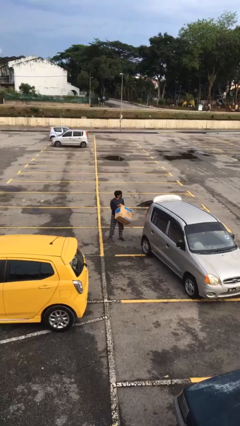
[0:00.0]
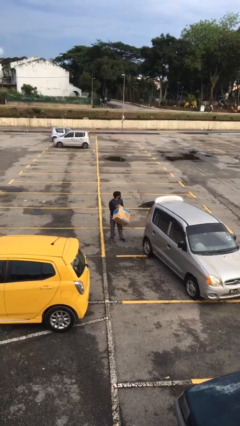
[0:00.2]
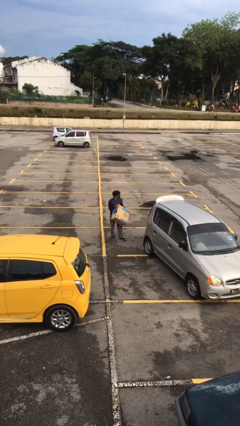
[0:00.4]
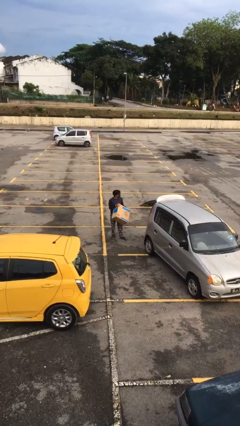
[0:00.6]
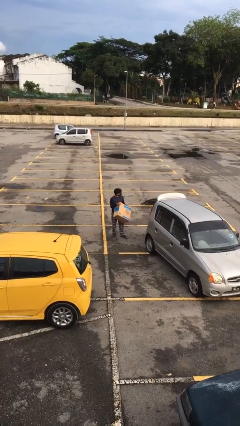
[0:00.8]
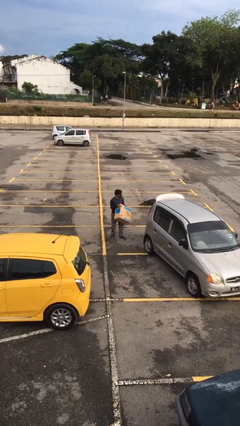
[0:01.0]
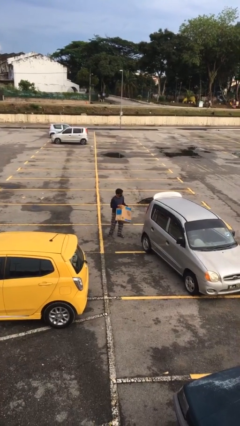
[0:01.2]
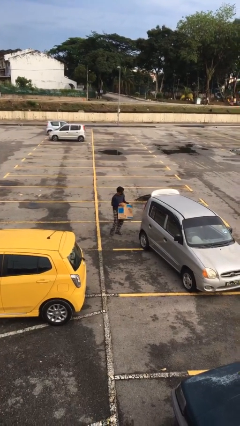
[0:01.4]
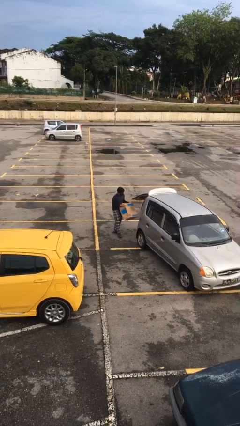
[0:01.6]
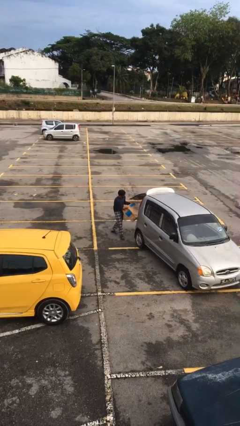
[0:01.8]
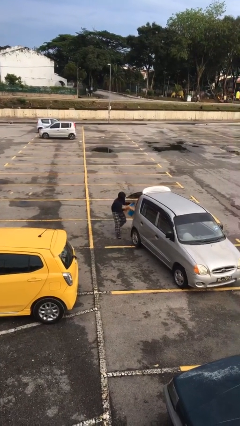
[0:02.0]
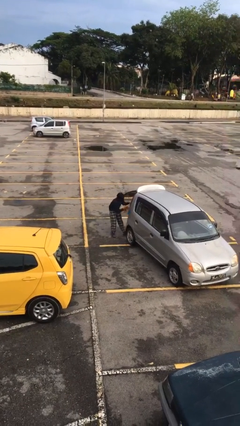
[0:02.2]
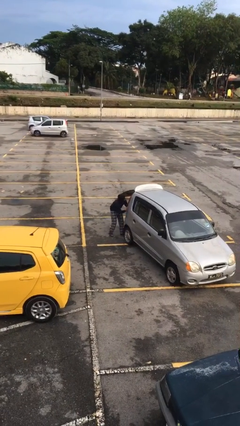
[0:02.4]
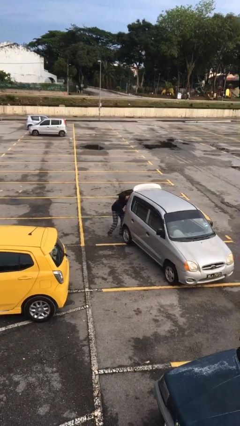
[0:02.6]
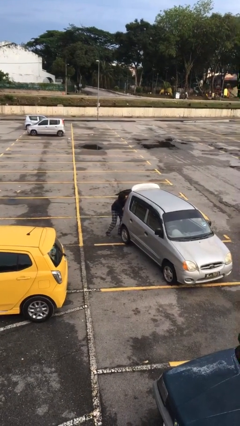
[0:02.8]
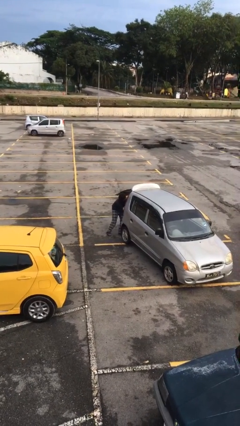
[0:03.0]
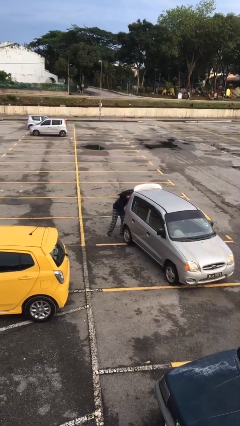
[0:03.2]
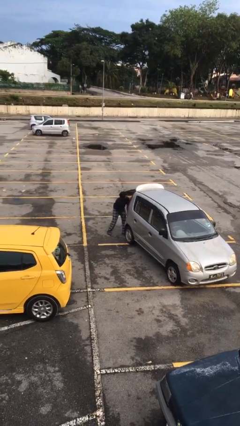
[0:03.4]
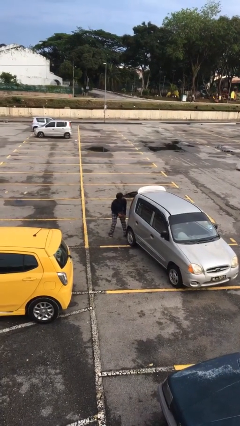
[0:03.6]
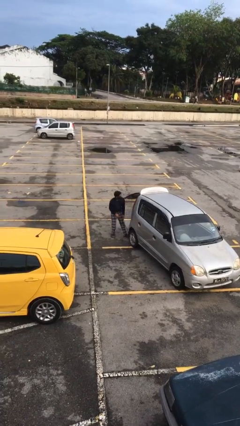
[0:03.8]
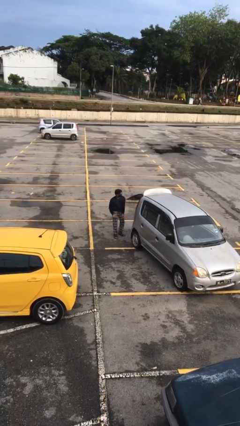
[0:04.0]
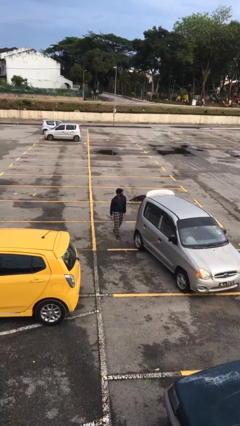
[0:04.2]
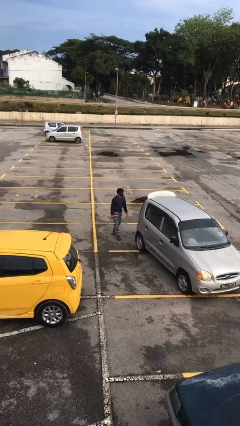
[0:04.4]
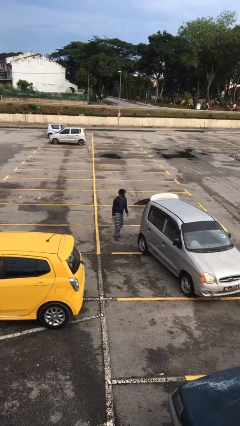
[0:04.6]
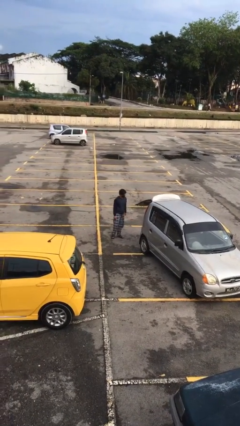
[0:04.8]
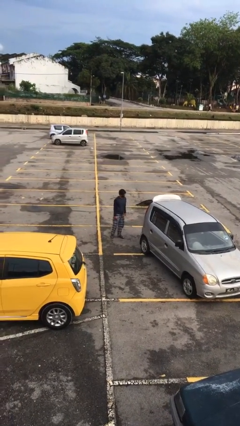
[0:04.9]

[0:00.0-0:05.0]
person loads car

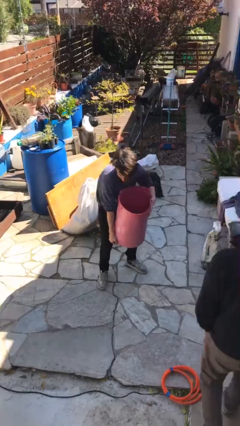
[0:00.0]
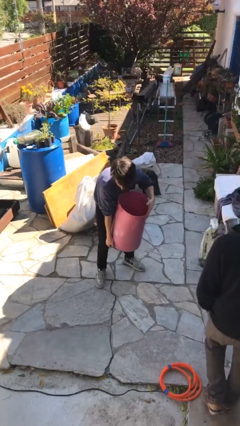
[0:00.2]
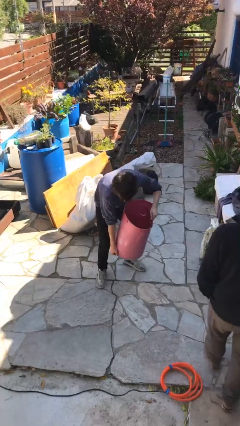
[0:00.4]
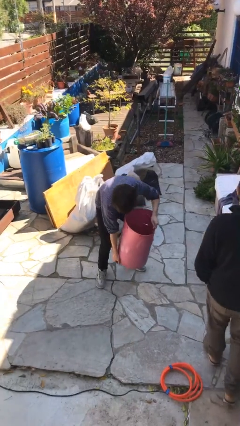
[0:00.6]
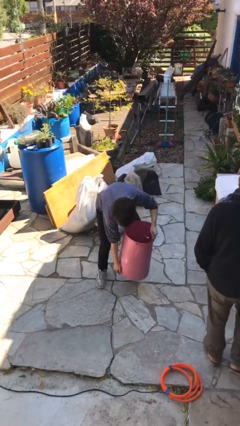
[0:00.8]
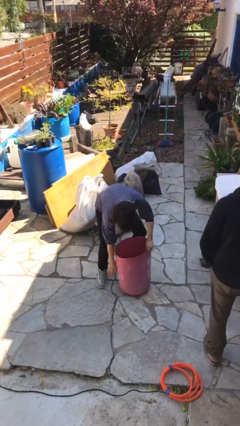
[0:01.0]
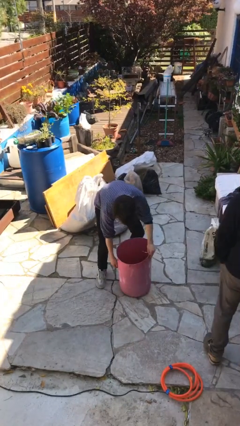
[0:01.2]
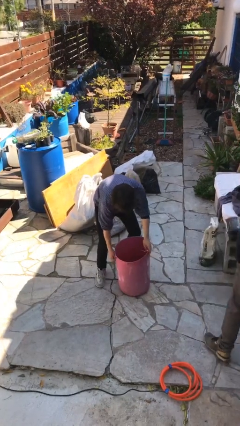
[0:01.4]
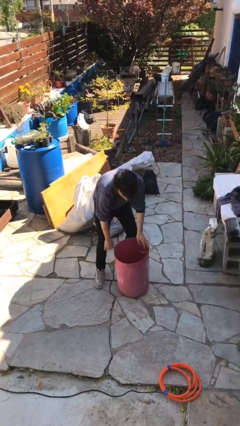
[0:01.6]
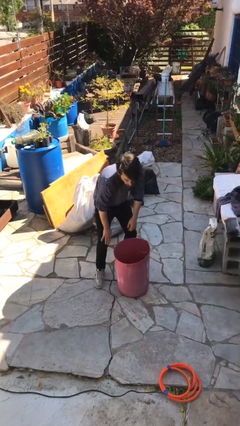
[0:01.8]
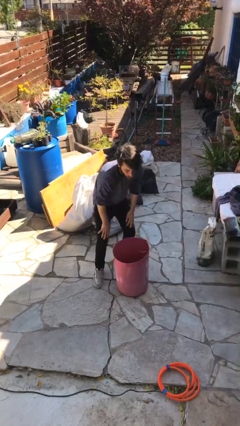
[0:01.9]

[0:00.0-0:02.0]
person puts down object on floor

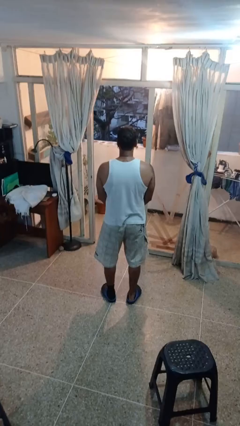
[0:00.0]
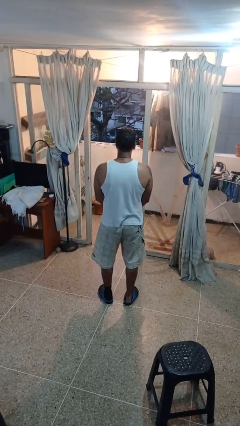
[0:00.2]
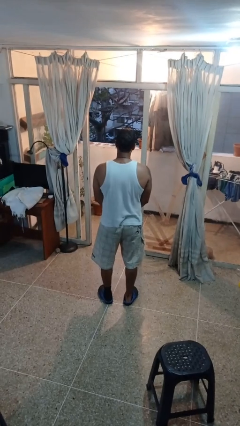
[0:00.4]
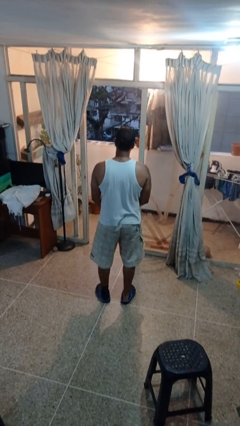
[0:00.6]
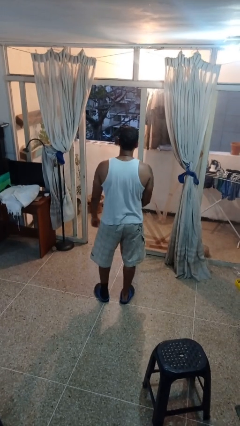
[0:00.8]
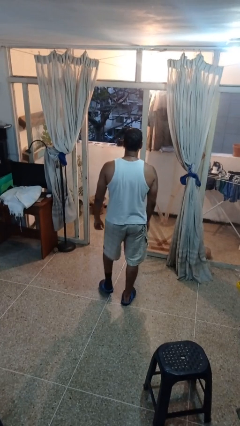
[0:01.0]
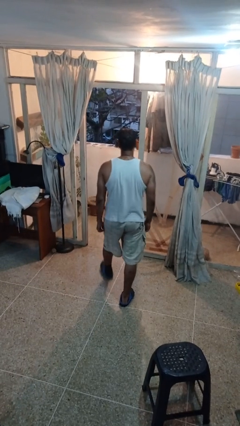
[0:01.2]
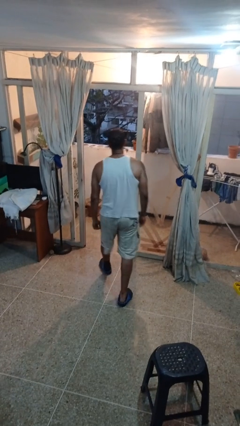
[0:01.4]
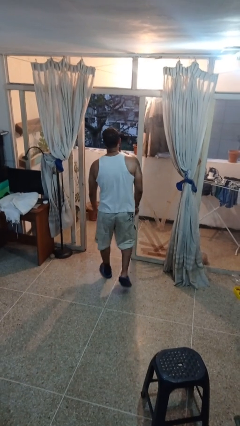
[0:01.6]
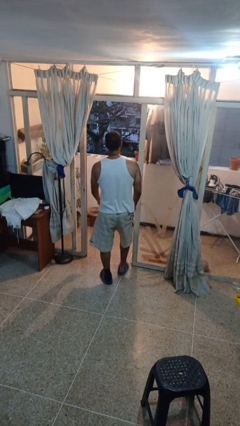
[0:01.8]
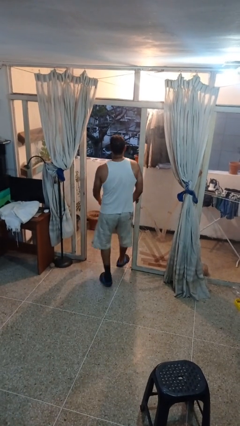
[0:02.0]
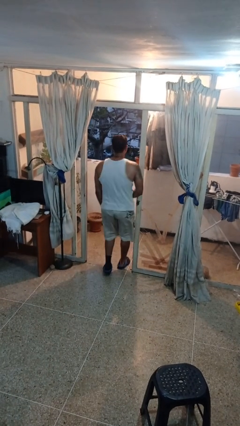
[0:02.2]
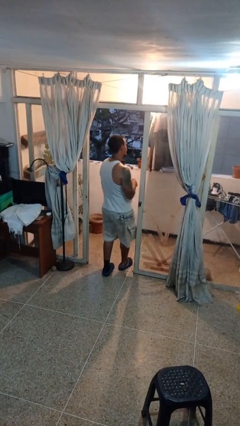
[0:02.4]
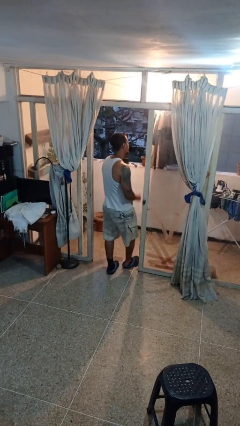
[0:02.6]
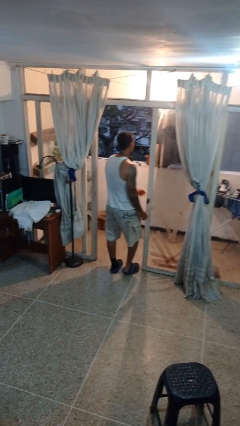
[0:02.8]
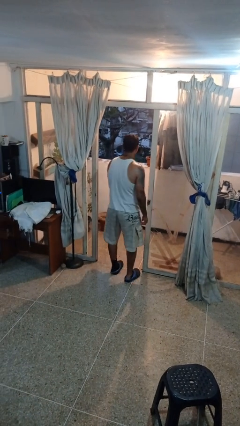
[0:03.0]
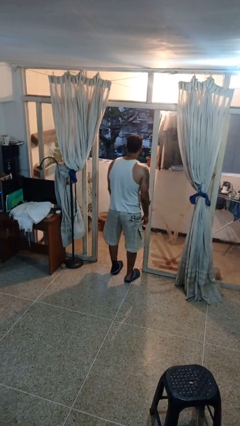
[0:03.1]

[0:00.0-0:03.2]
person bumps into wall

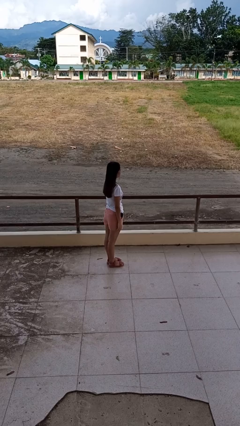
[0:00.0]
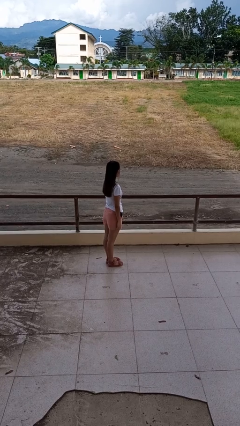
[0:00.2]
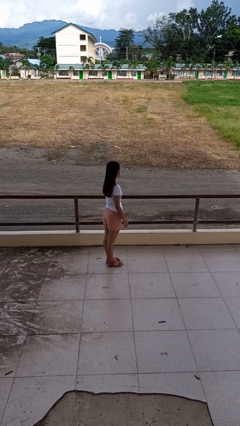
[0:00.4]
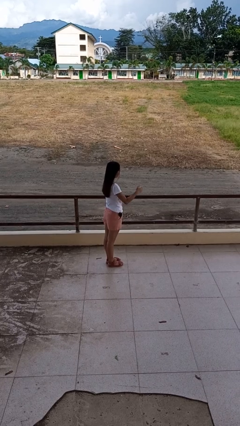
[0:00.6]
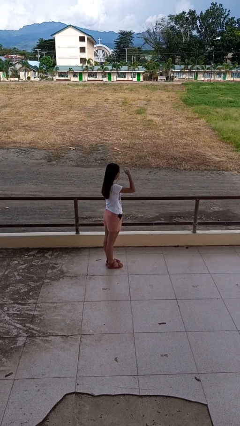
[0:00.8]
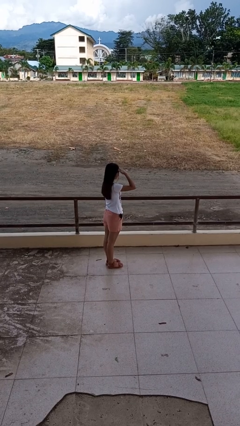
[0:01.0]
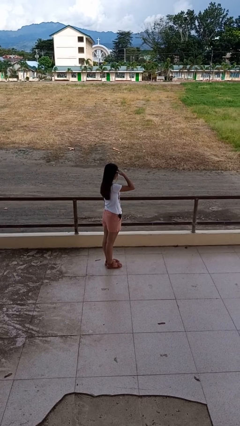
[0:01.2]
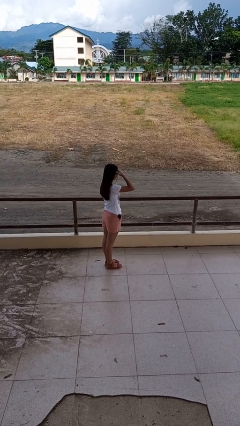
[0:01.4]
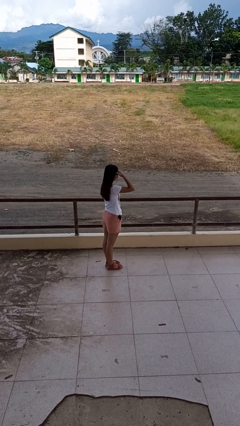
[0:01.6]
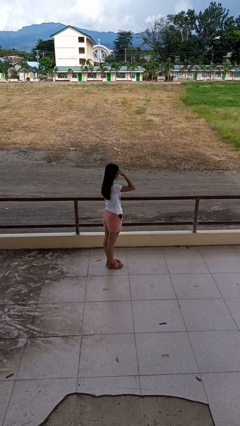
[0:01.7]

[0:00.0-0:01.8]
person shades eyes

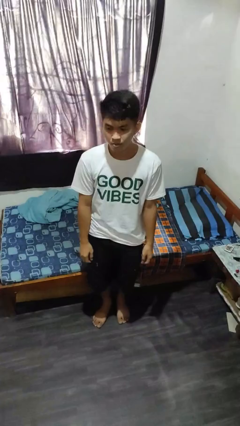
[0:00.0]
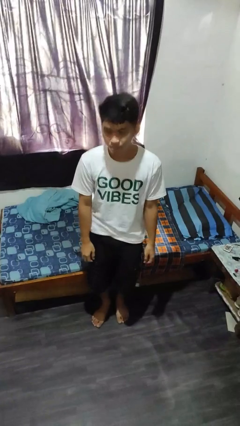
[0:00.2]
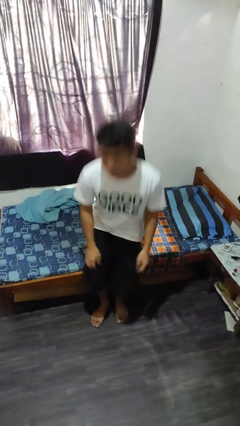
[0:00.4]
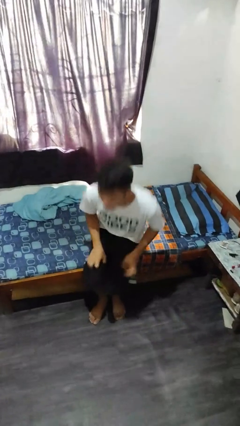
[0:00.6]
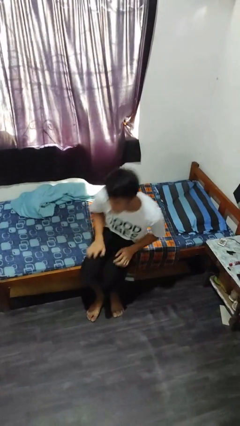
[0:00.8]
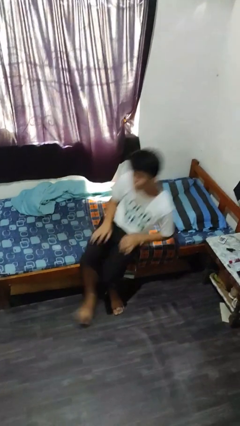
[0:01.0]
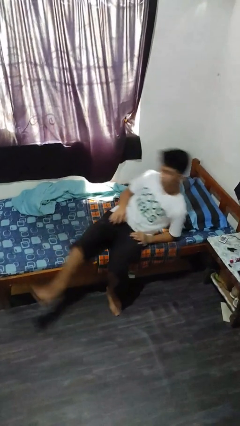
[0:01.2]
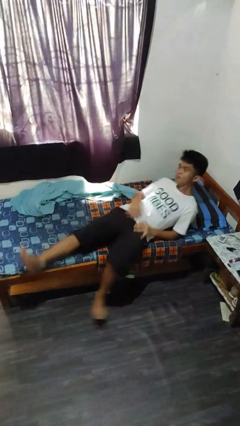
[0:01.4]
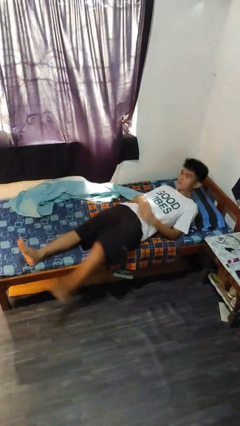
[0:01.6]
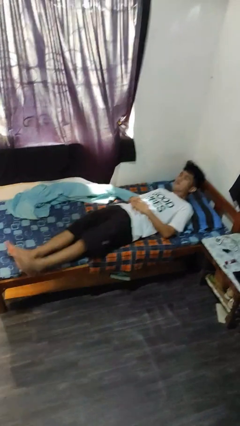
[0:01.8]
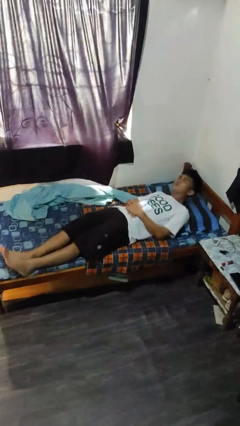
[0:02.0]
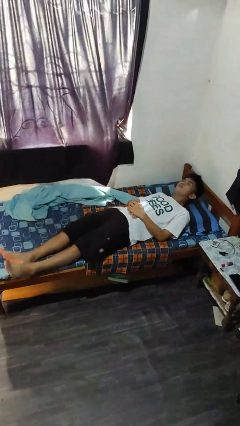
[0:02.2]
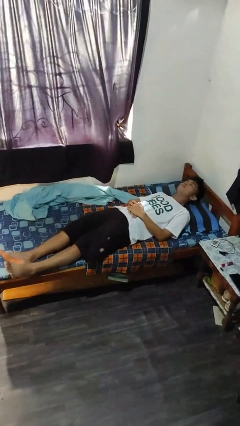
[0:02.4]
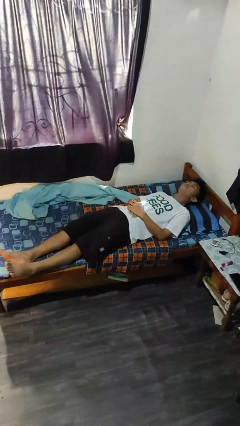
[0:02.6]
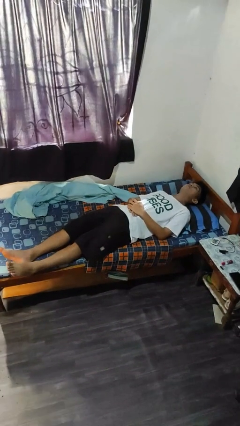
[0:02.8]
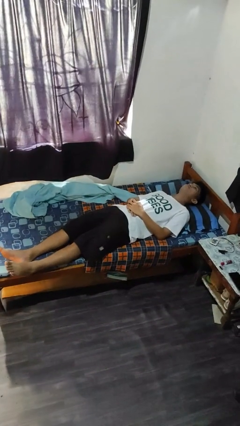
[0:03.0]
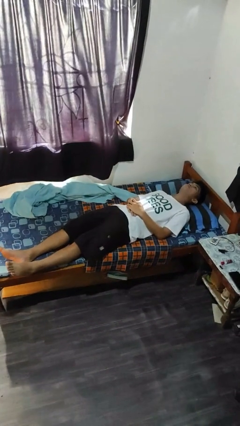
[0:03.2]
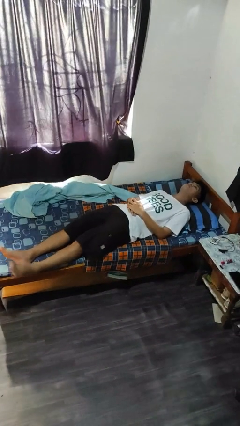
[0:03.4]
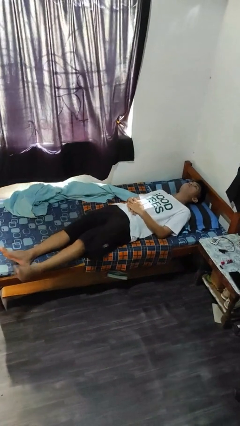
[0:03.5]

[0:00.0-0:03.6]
person lies down on bed

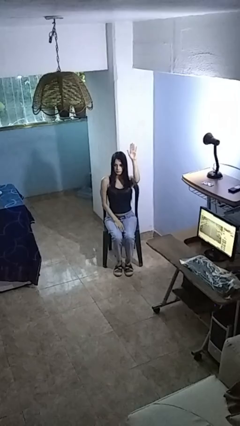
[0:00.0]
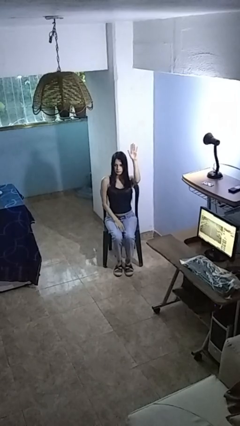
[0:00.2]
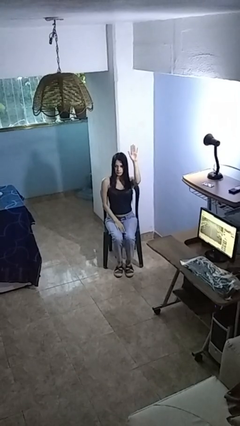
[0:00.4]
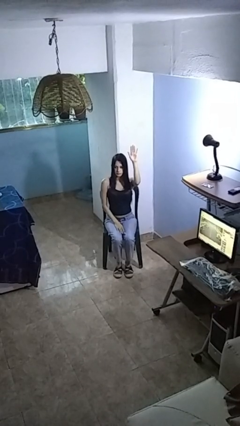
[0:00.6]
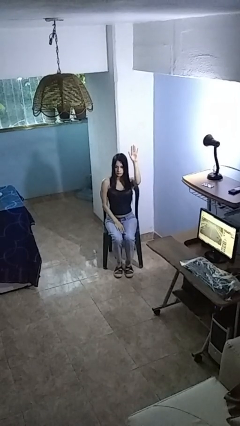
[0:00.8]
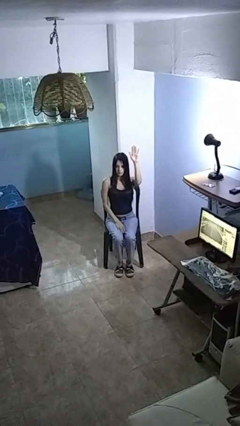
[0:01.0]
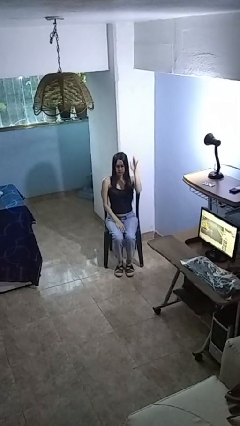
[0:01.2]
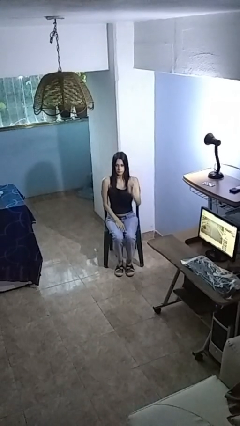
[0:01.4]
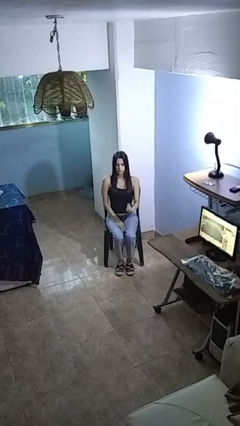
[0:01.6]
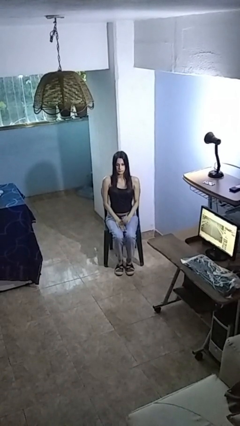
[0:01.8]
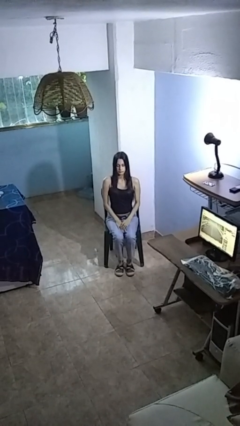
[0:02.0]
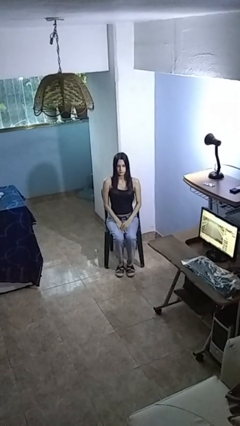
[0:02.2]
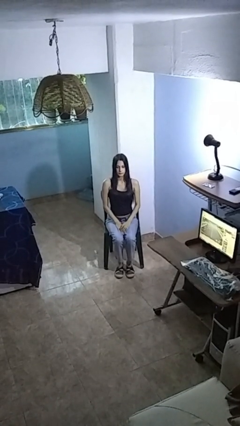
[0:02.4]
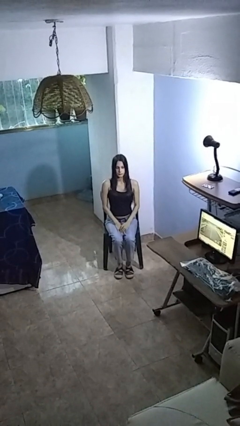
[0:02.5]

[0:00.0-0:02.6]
person gestures lower hand
